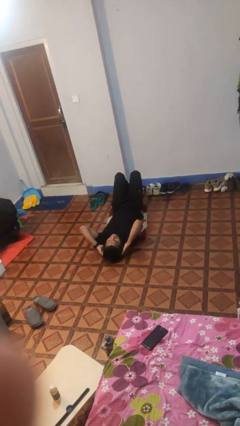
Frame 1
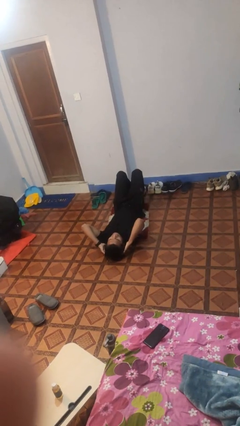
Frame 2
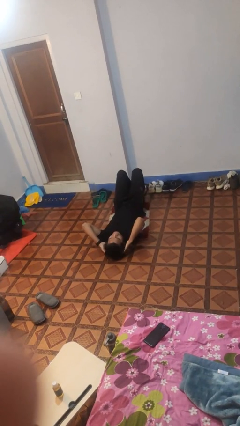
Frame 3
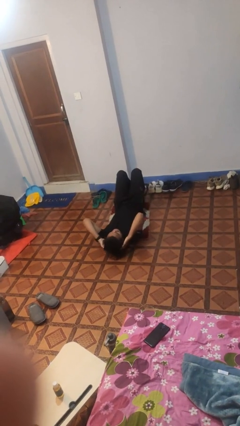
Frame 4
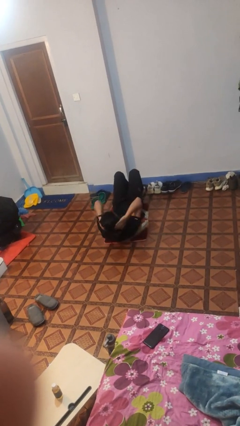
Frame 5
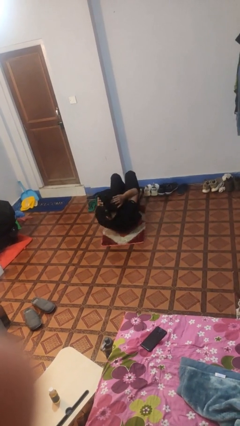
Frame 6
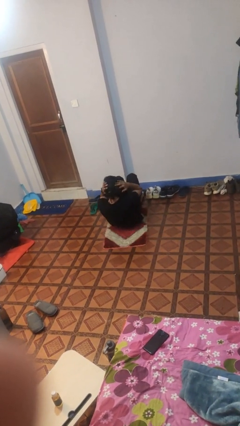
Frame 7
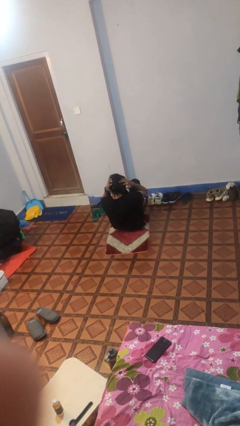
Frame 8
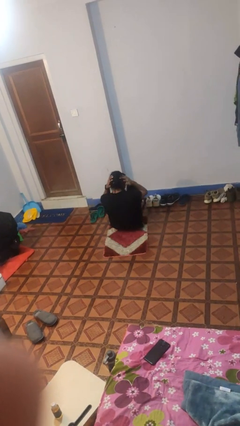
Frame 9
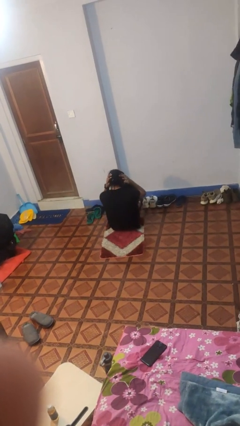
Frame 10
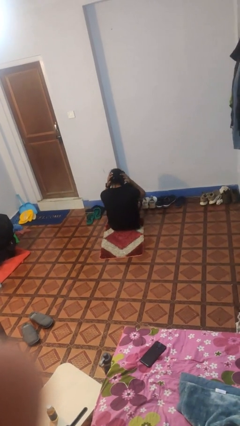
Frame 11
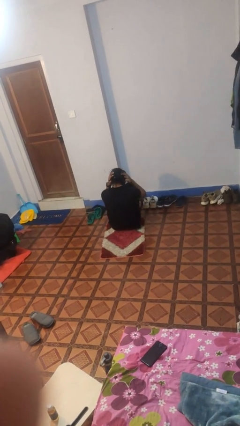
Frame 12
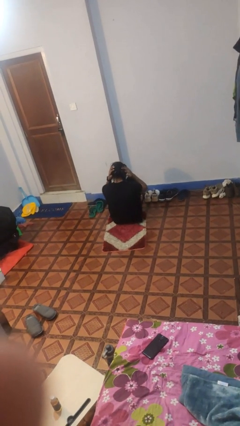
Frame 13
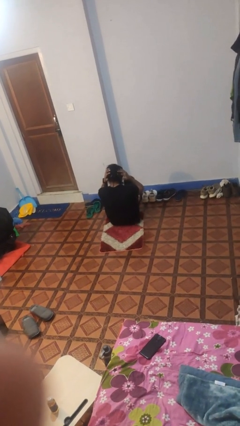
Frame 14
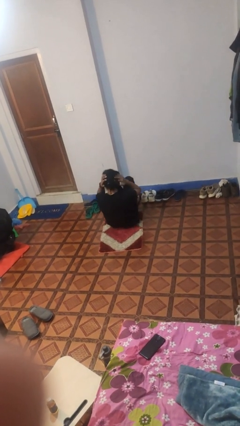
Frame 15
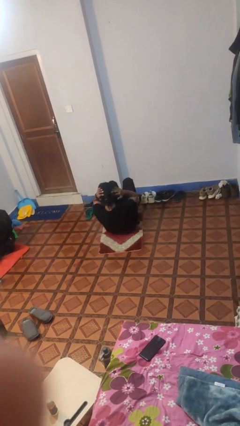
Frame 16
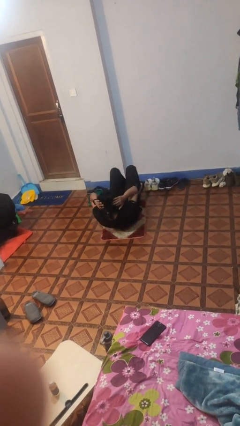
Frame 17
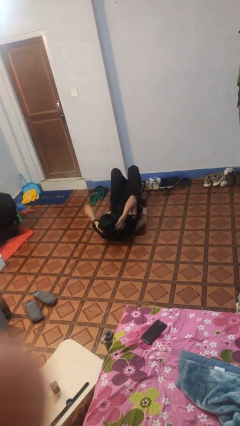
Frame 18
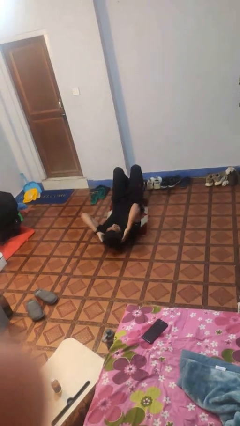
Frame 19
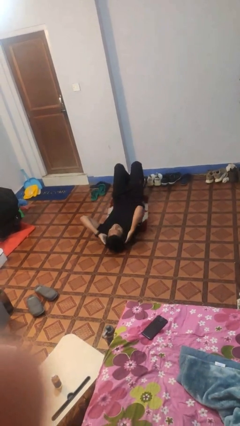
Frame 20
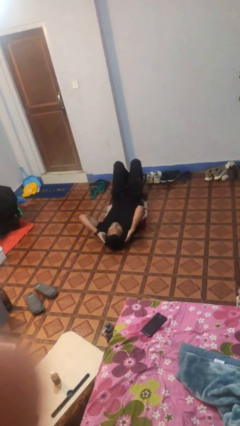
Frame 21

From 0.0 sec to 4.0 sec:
person exercises with situp

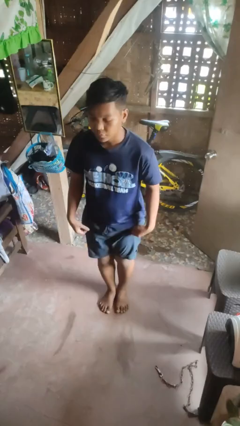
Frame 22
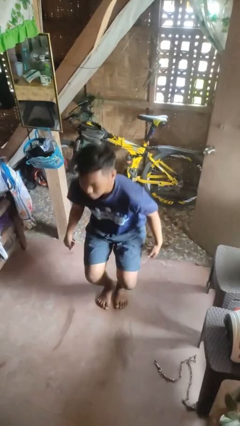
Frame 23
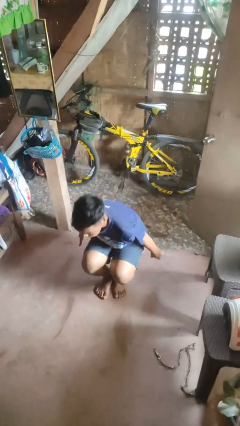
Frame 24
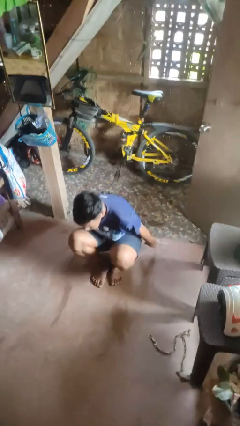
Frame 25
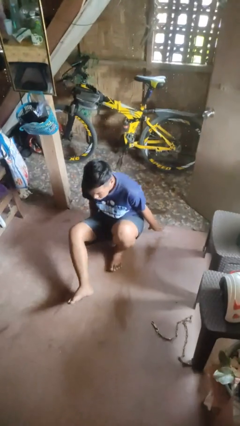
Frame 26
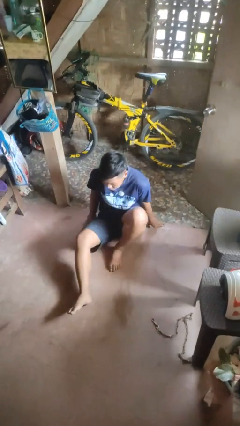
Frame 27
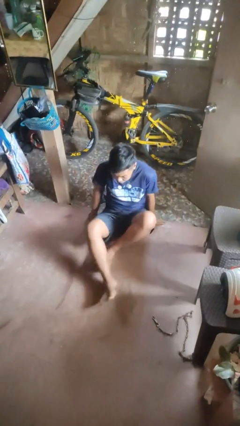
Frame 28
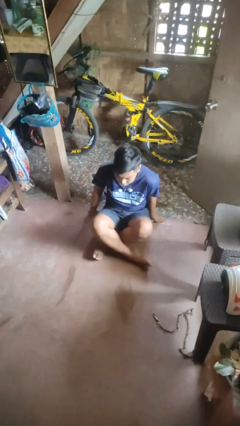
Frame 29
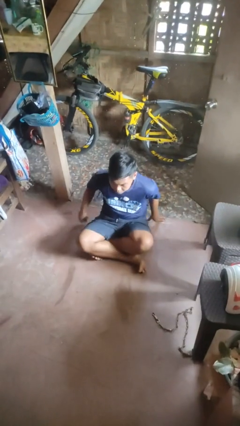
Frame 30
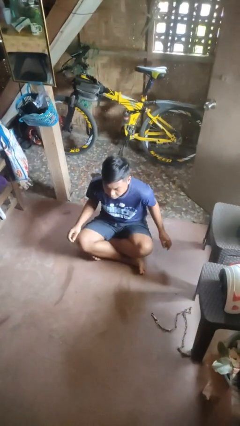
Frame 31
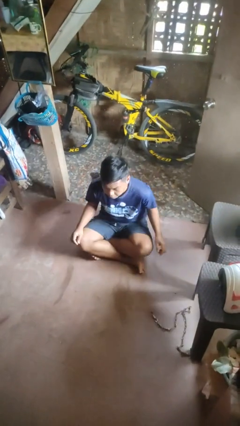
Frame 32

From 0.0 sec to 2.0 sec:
person sits crisscross

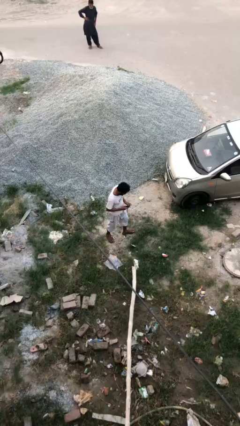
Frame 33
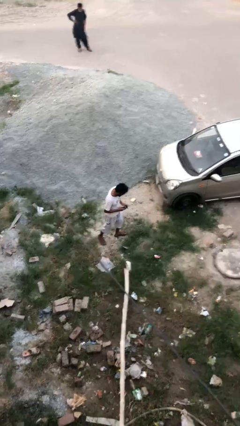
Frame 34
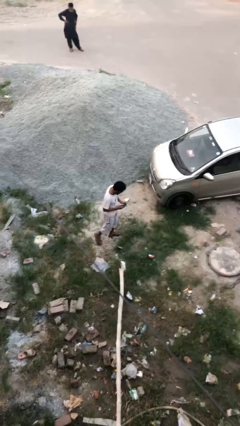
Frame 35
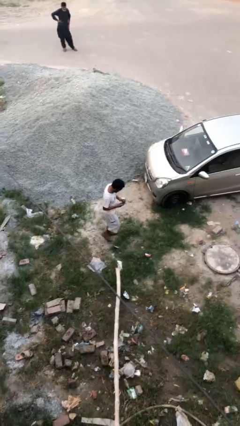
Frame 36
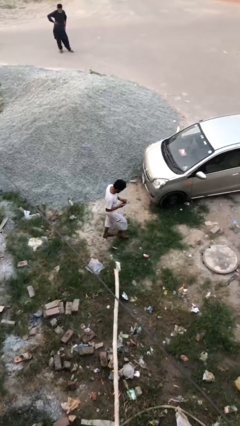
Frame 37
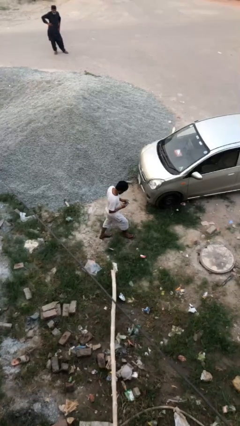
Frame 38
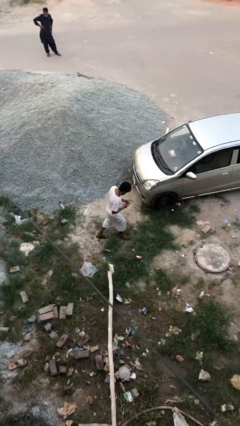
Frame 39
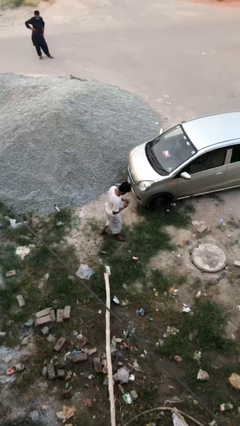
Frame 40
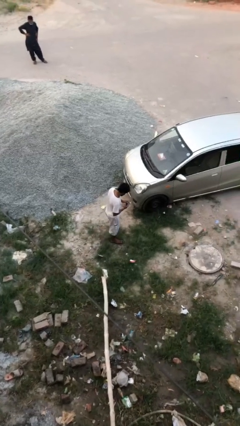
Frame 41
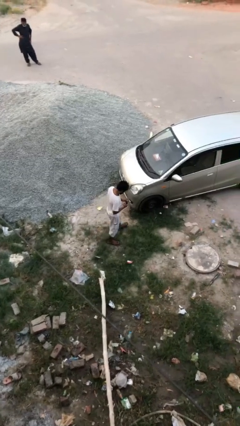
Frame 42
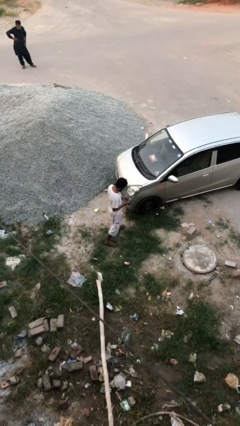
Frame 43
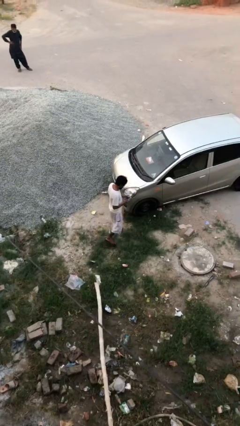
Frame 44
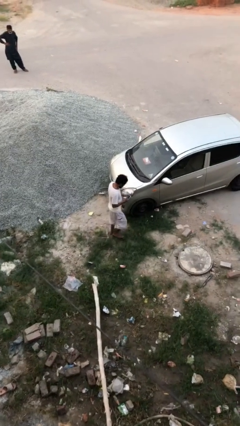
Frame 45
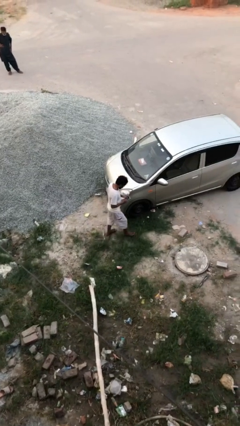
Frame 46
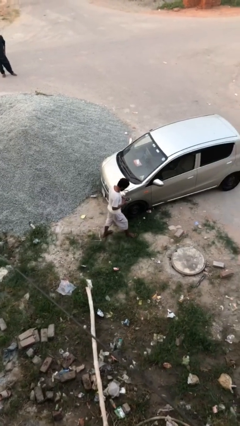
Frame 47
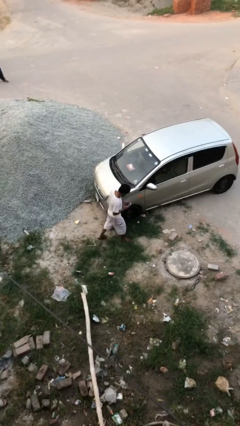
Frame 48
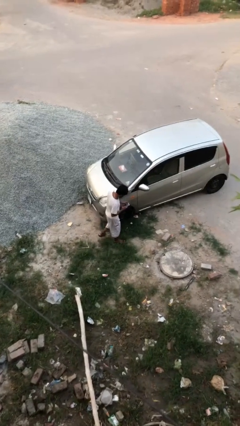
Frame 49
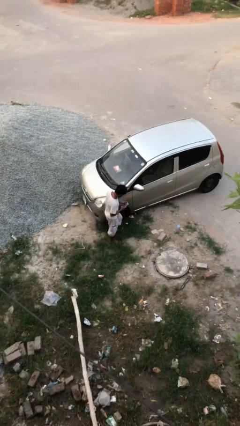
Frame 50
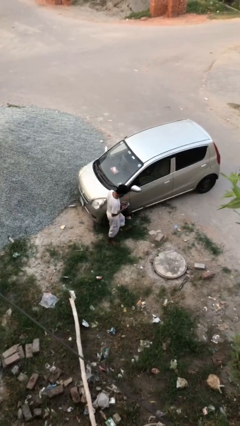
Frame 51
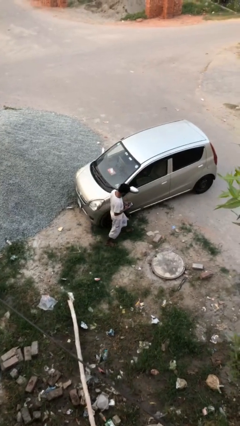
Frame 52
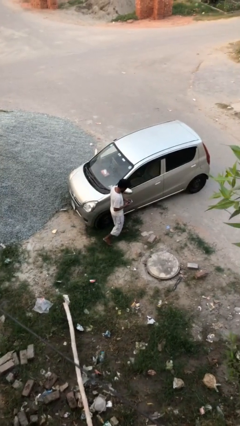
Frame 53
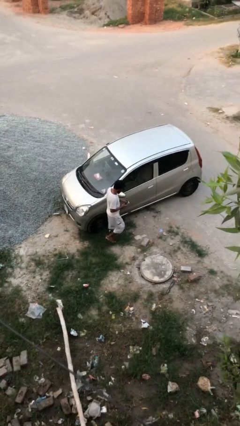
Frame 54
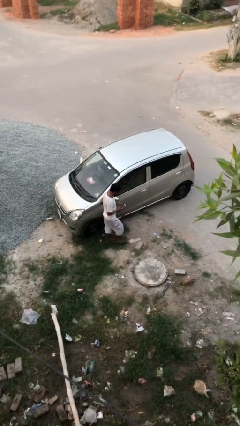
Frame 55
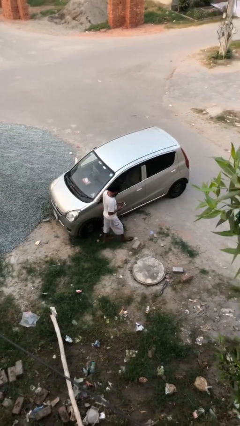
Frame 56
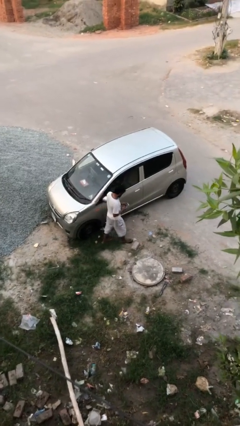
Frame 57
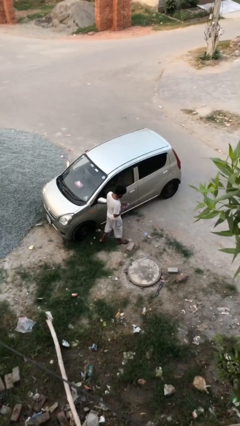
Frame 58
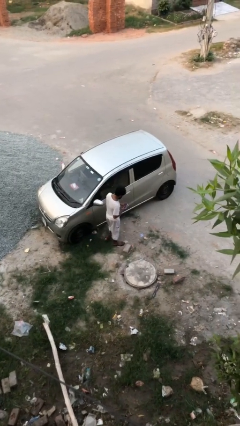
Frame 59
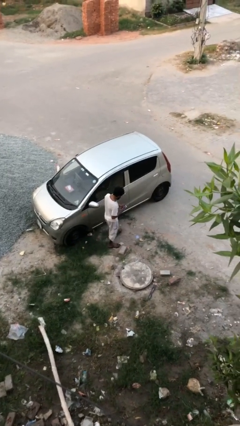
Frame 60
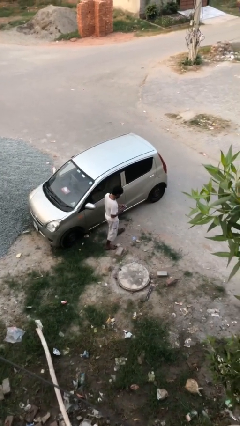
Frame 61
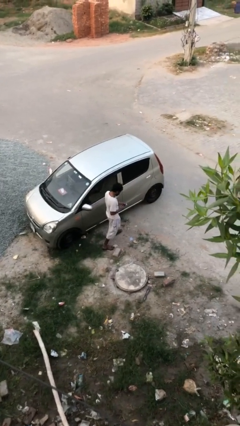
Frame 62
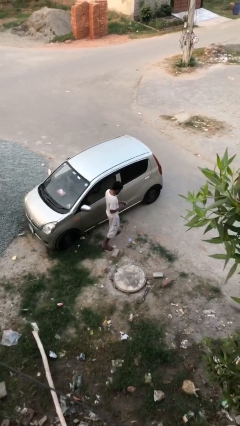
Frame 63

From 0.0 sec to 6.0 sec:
person texts on phone

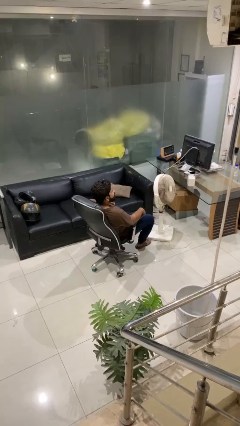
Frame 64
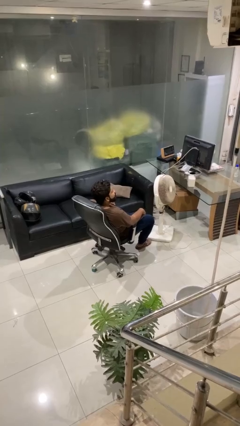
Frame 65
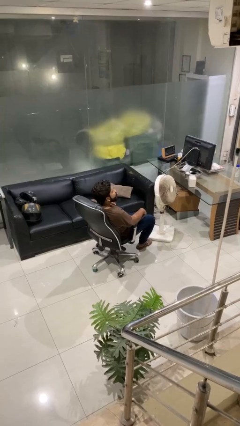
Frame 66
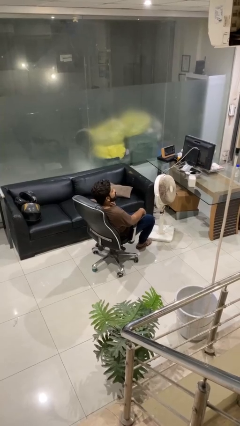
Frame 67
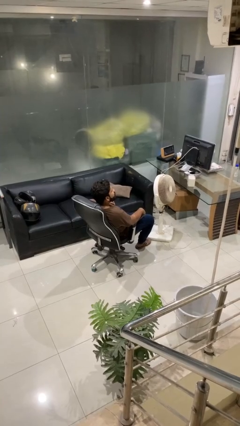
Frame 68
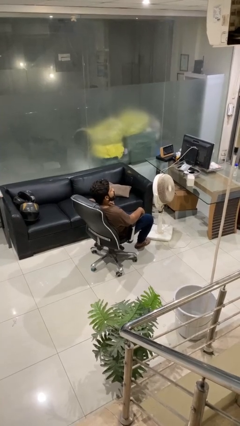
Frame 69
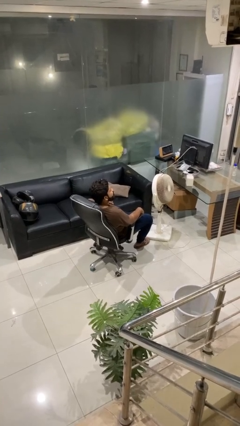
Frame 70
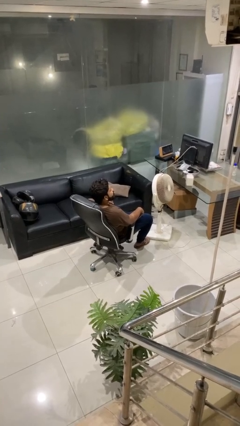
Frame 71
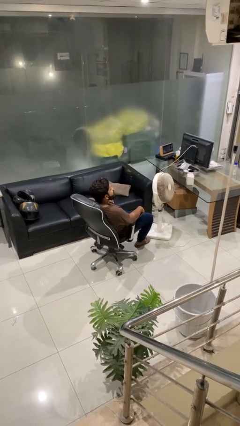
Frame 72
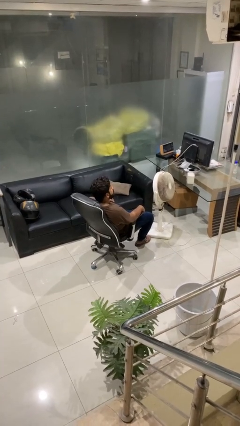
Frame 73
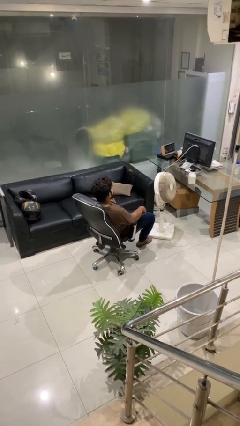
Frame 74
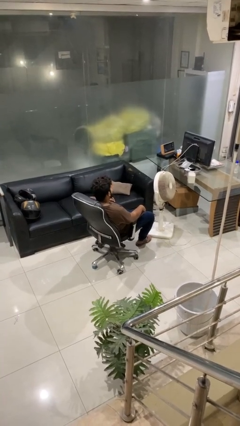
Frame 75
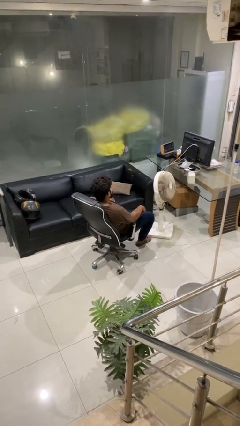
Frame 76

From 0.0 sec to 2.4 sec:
person sticks out tongue

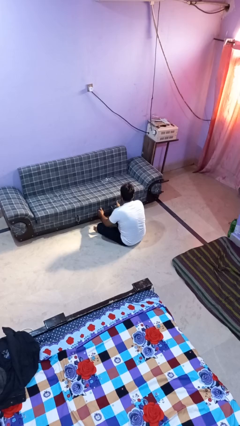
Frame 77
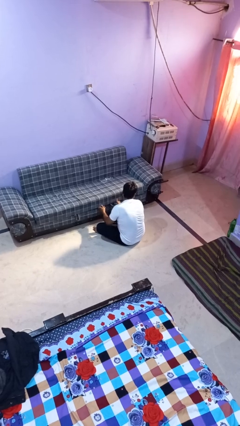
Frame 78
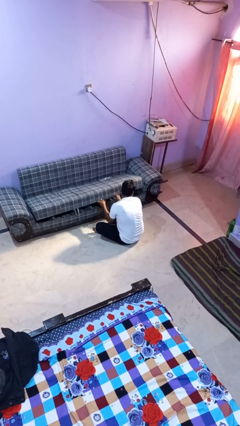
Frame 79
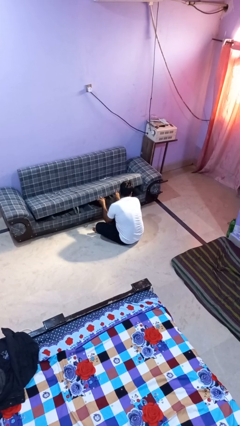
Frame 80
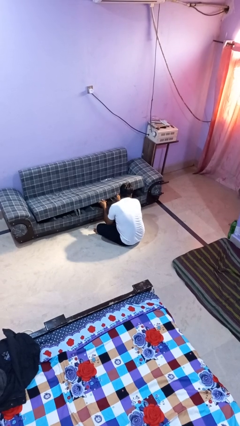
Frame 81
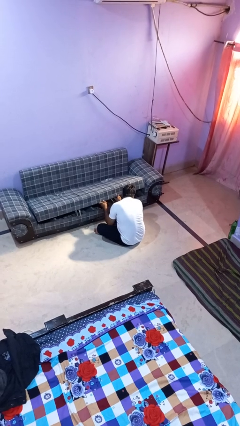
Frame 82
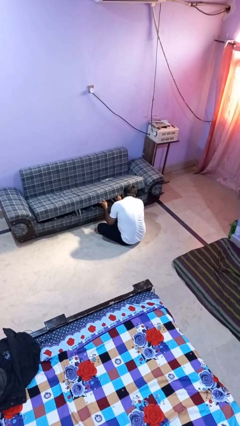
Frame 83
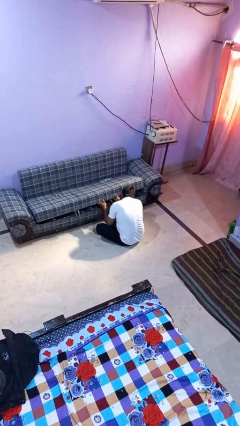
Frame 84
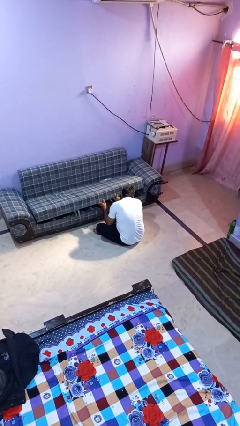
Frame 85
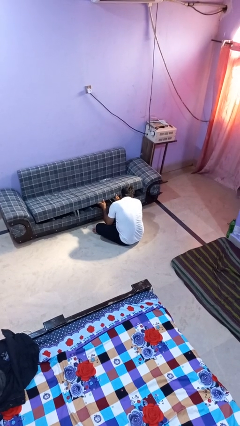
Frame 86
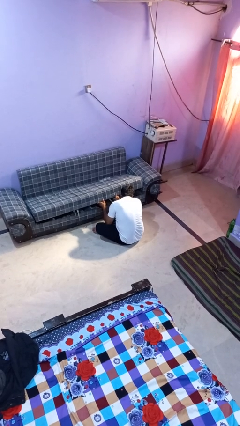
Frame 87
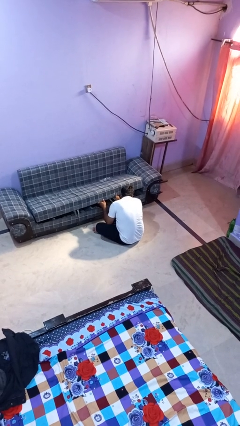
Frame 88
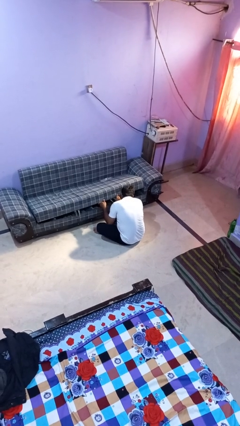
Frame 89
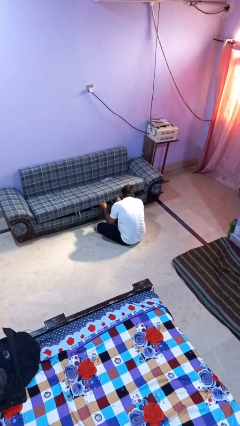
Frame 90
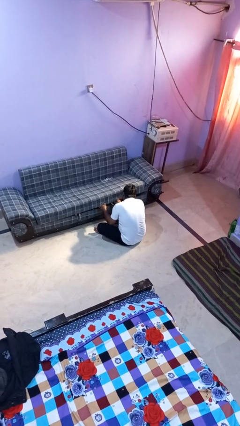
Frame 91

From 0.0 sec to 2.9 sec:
person searches under couch

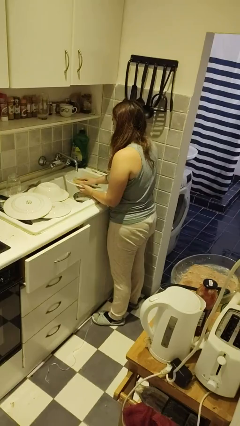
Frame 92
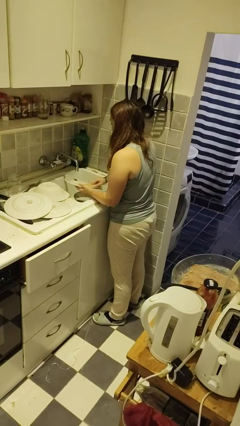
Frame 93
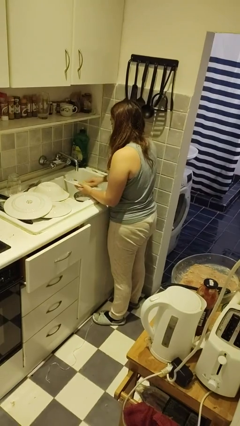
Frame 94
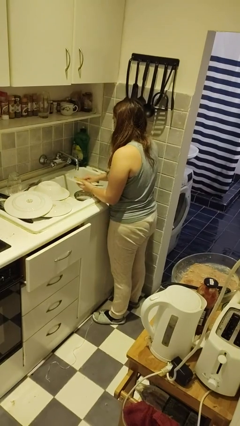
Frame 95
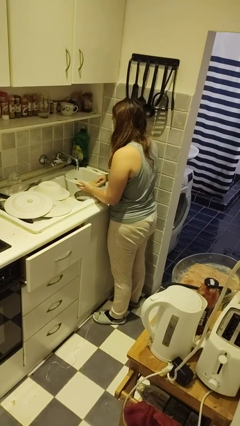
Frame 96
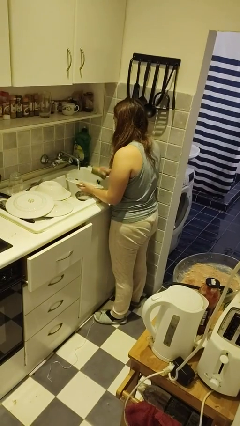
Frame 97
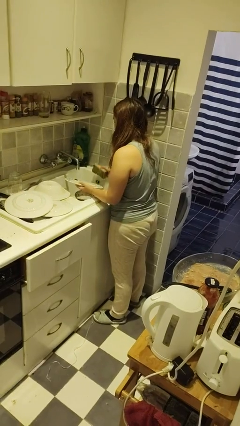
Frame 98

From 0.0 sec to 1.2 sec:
person washes dish
